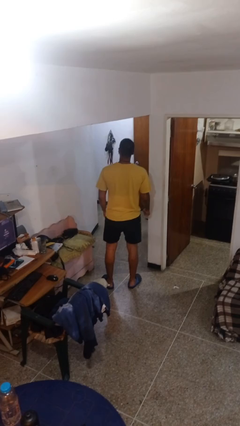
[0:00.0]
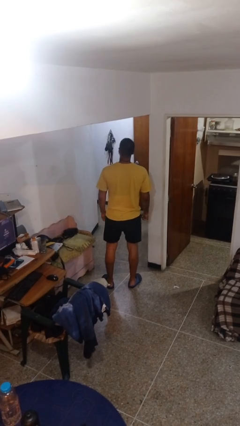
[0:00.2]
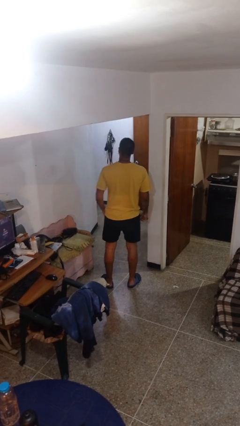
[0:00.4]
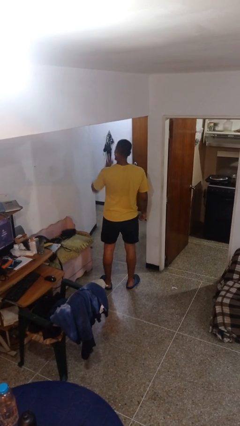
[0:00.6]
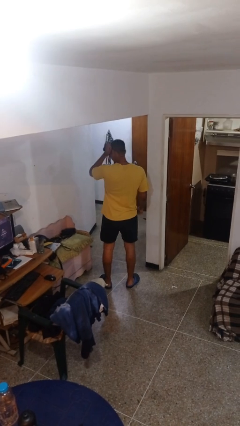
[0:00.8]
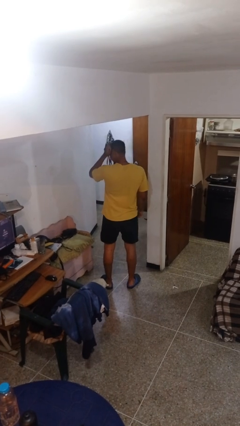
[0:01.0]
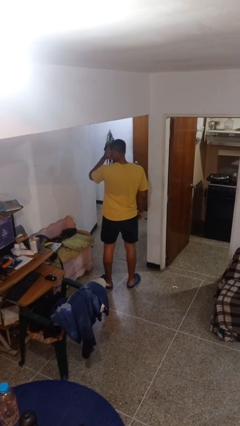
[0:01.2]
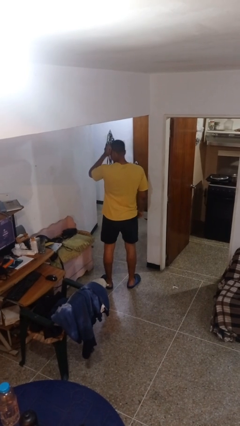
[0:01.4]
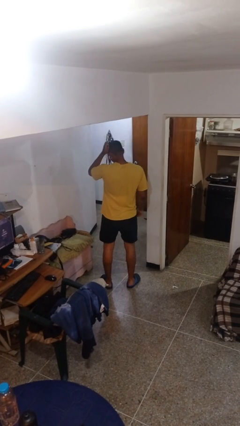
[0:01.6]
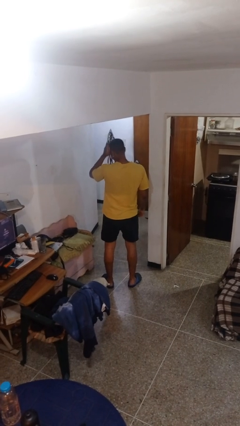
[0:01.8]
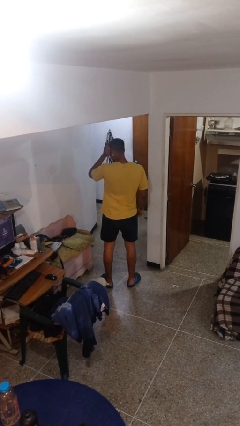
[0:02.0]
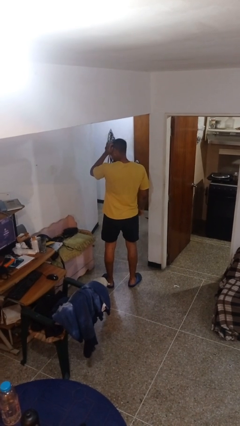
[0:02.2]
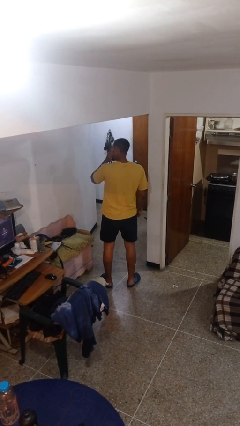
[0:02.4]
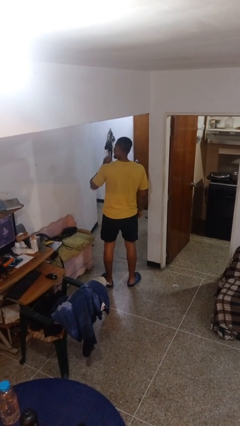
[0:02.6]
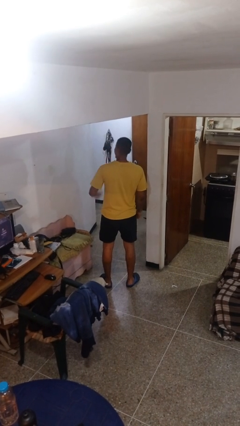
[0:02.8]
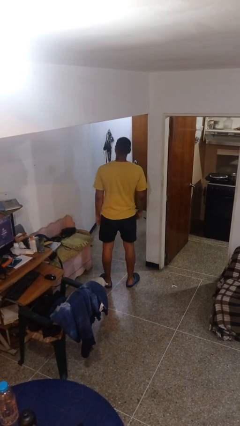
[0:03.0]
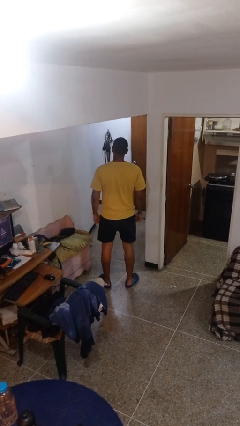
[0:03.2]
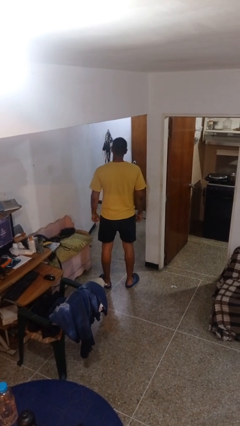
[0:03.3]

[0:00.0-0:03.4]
person scratches face

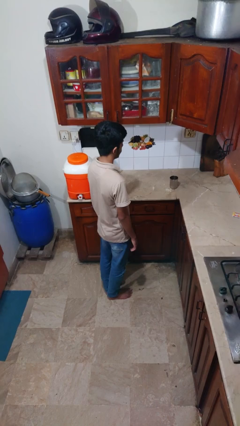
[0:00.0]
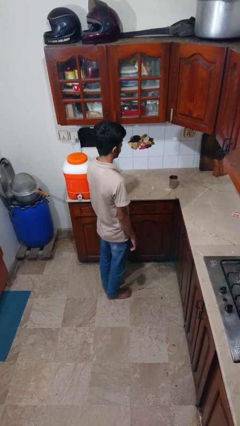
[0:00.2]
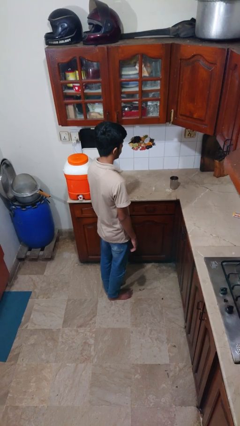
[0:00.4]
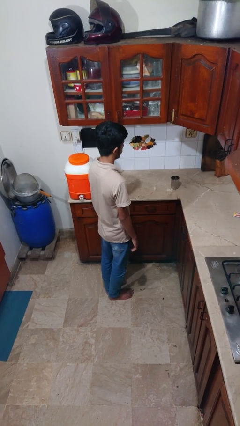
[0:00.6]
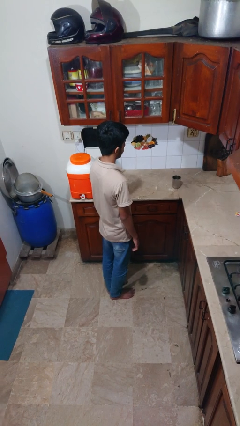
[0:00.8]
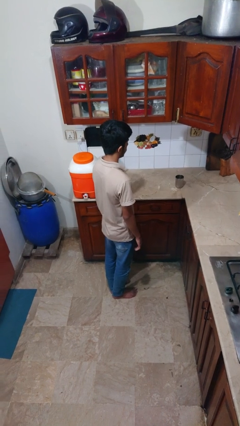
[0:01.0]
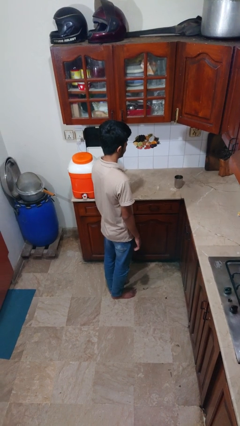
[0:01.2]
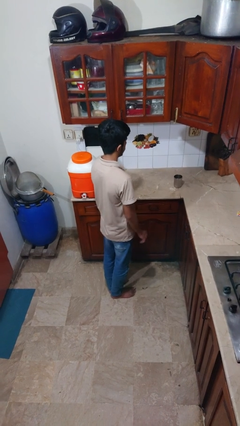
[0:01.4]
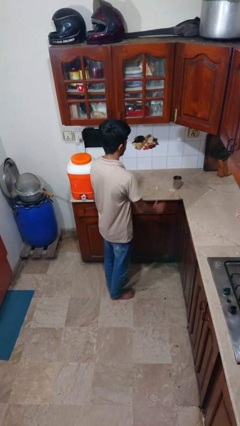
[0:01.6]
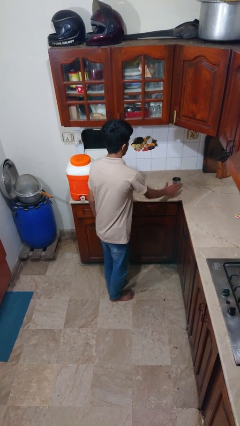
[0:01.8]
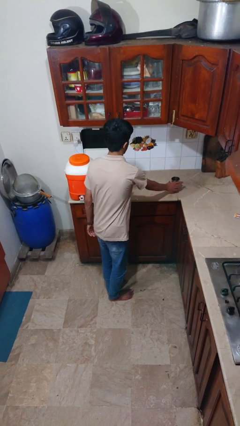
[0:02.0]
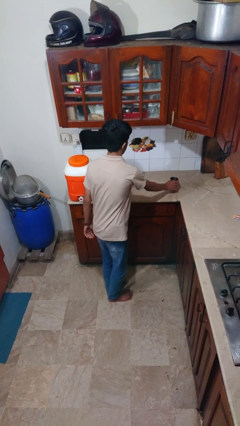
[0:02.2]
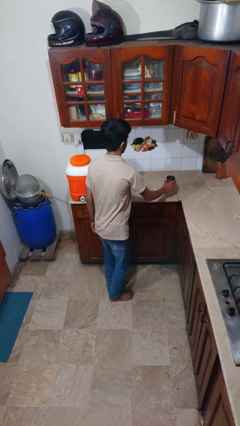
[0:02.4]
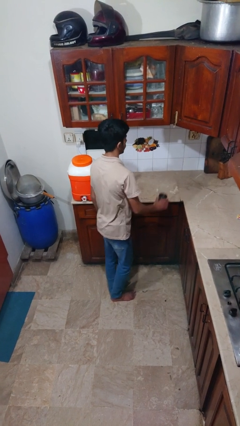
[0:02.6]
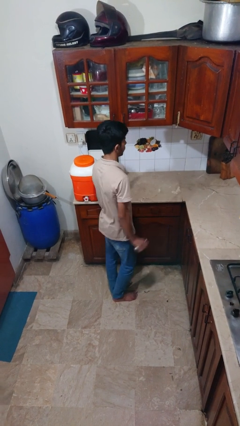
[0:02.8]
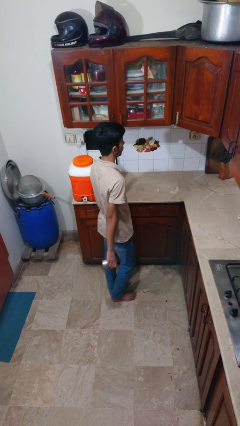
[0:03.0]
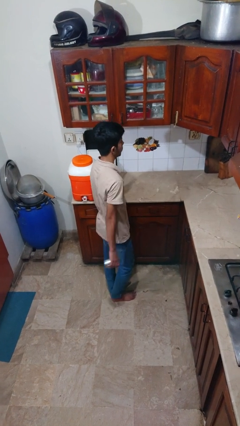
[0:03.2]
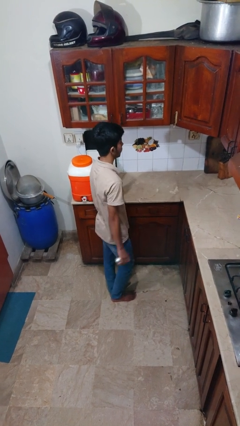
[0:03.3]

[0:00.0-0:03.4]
person picks up object from countertop

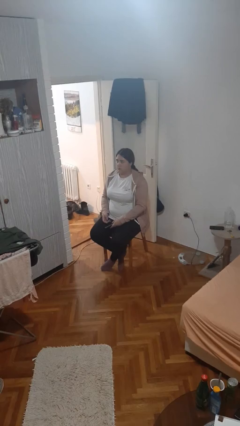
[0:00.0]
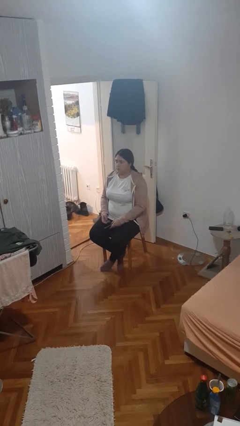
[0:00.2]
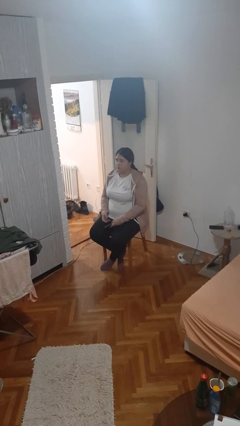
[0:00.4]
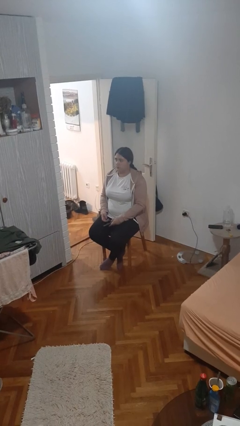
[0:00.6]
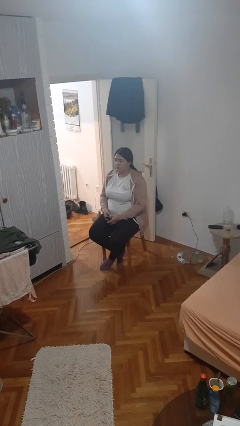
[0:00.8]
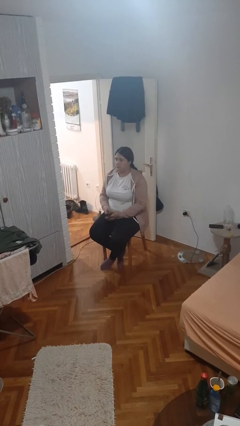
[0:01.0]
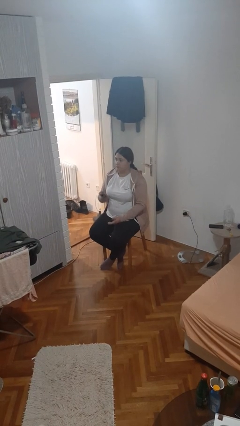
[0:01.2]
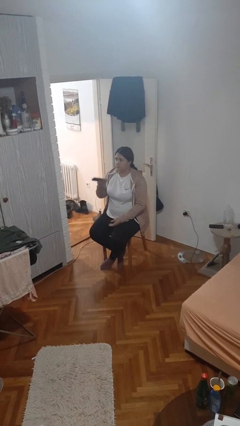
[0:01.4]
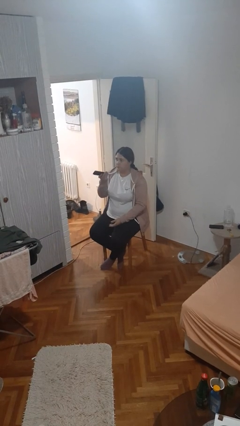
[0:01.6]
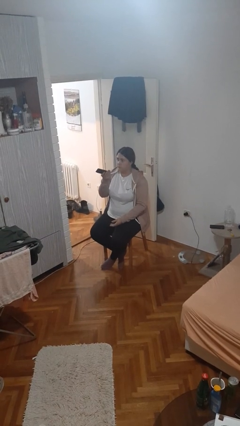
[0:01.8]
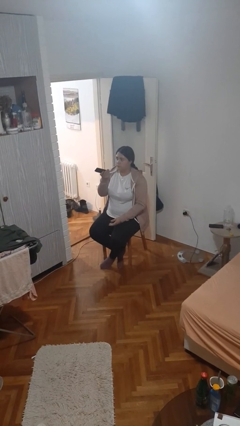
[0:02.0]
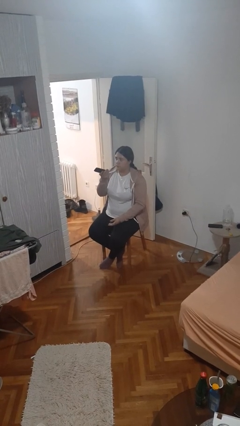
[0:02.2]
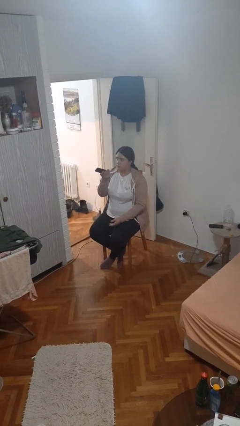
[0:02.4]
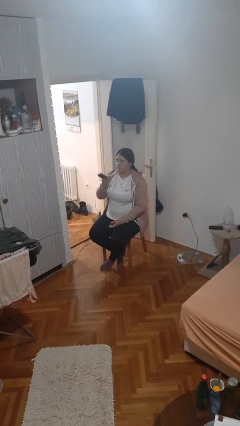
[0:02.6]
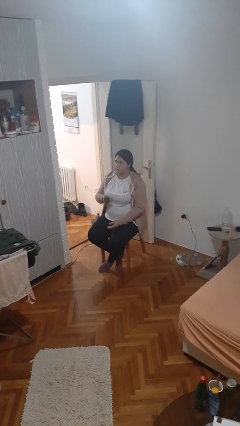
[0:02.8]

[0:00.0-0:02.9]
person uses television remote

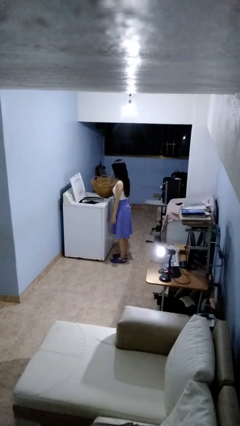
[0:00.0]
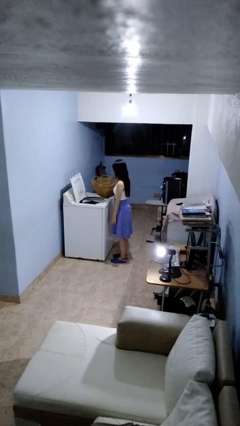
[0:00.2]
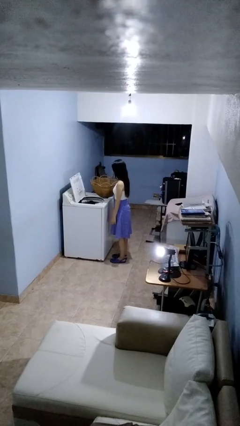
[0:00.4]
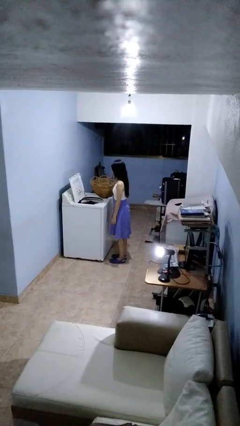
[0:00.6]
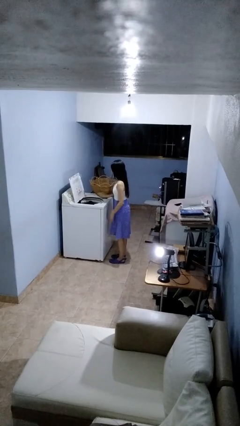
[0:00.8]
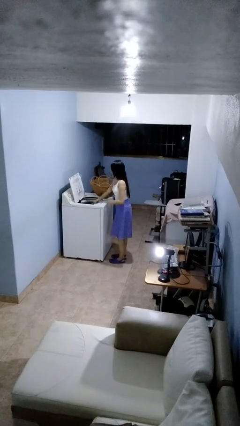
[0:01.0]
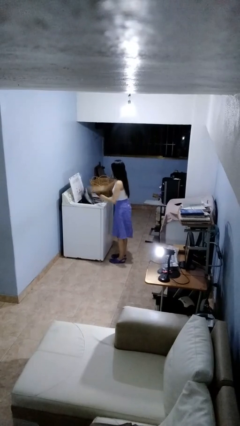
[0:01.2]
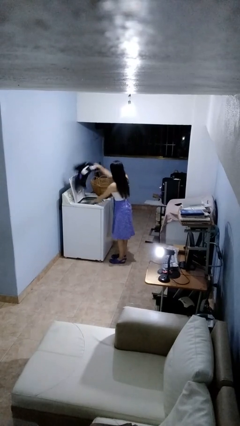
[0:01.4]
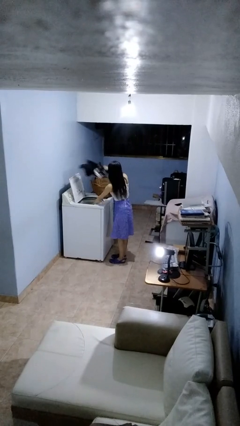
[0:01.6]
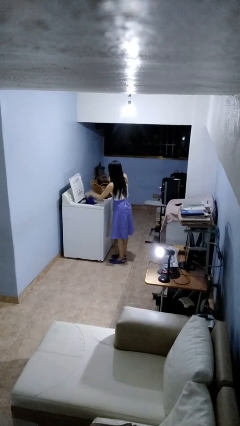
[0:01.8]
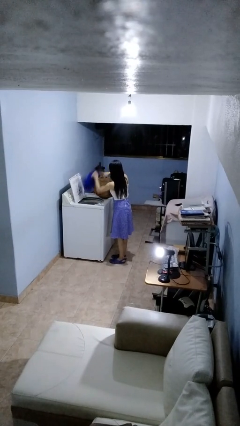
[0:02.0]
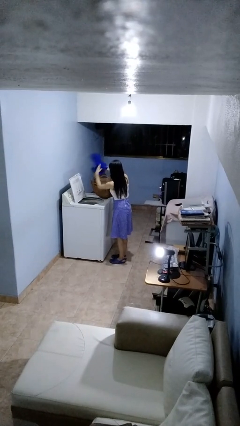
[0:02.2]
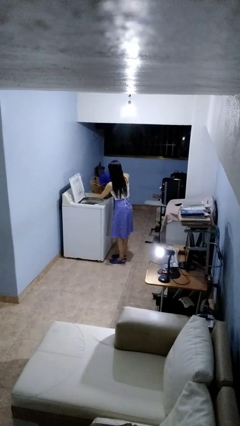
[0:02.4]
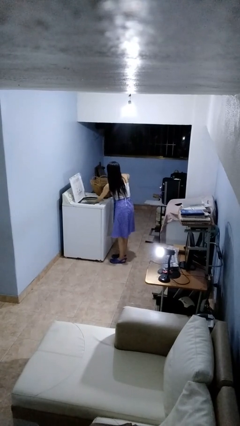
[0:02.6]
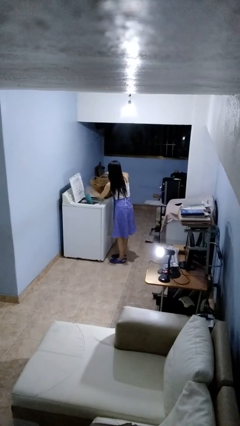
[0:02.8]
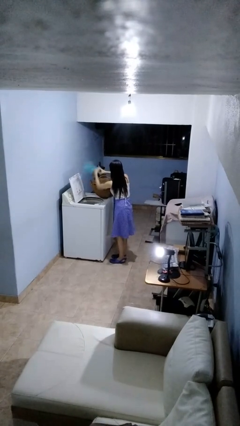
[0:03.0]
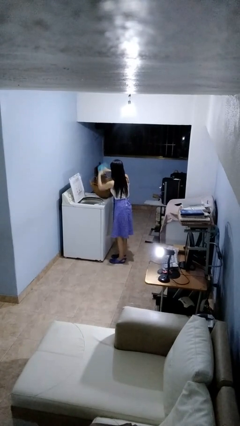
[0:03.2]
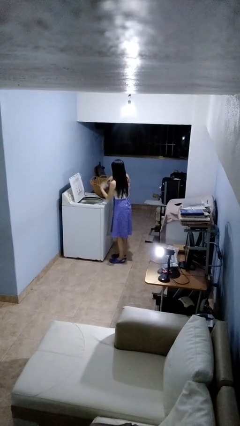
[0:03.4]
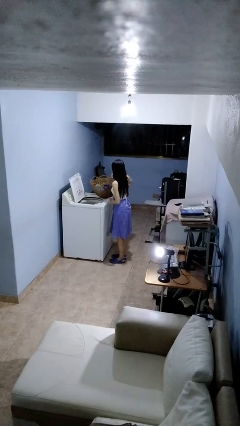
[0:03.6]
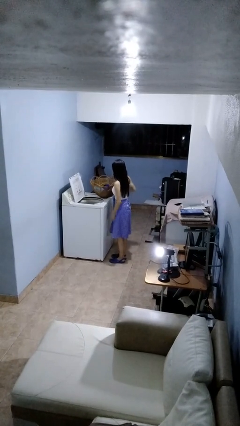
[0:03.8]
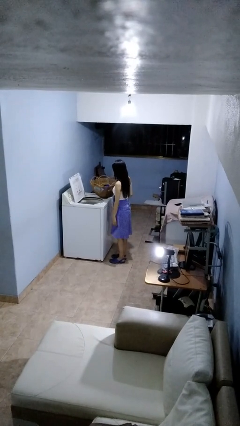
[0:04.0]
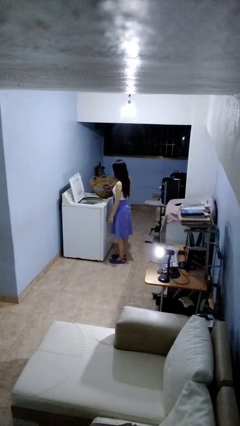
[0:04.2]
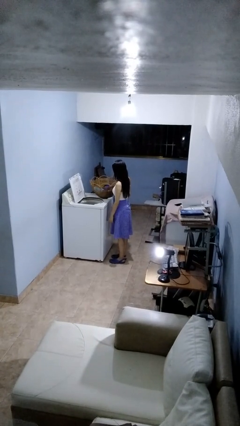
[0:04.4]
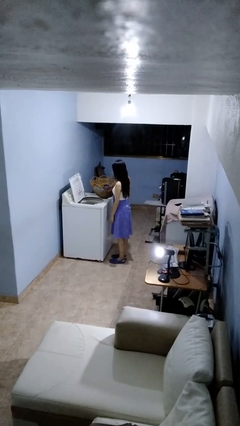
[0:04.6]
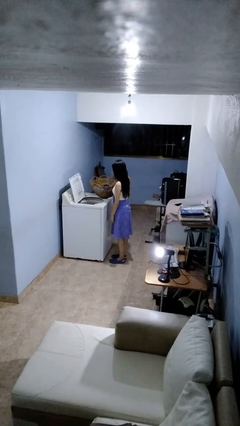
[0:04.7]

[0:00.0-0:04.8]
person unloads clotheswasher
